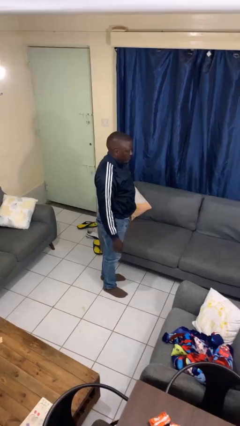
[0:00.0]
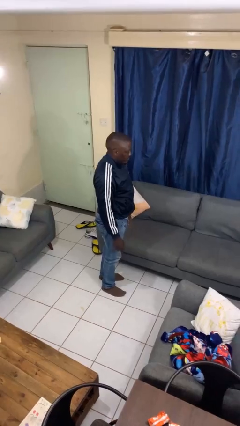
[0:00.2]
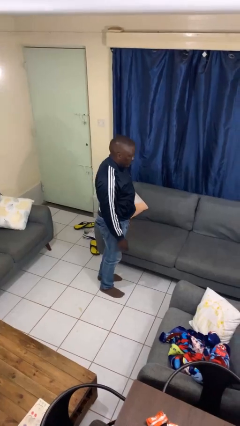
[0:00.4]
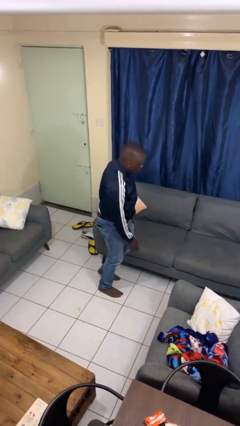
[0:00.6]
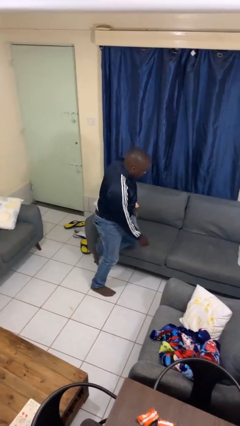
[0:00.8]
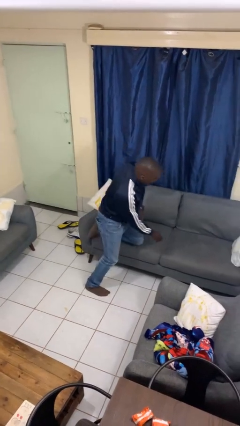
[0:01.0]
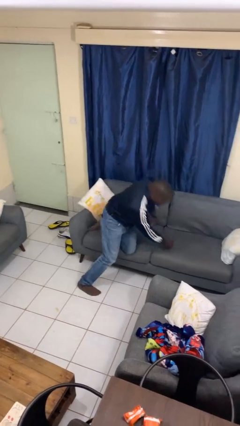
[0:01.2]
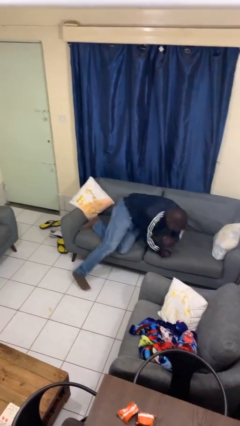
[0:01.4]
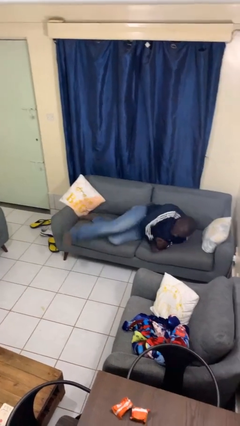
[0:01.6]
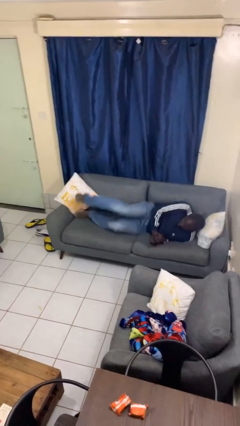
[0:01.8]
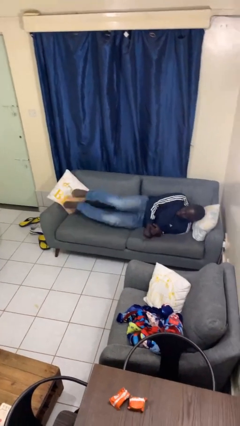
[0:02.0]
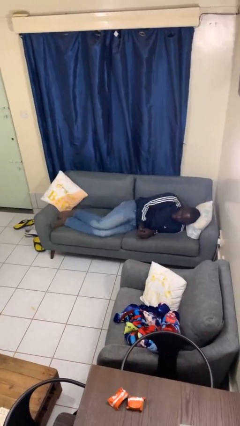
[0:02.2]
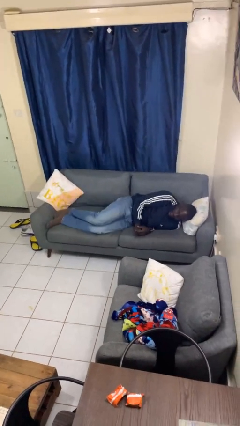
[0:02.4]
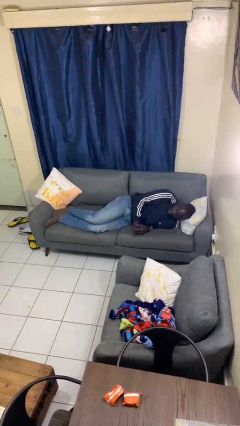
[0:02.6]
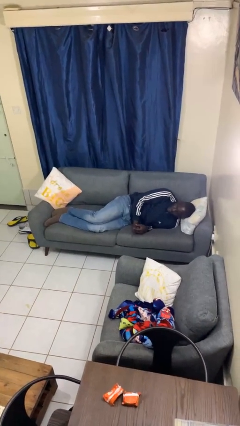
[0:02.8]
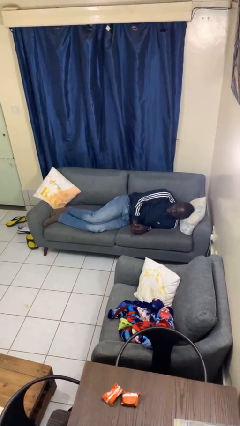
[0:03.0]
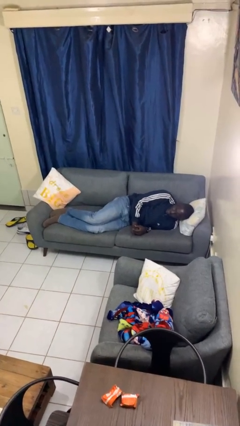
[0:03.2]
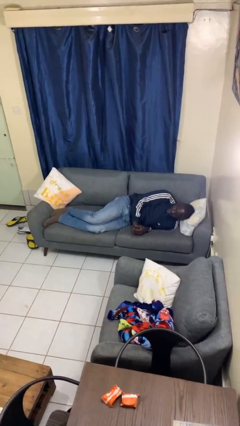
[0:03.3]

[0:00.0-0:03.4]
person lies down on couch

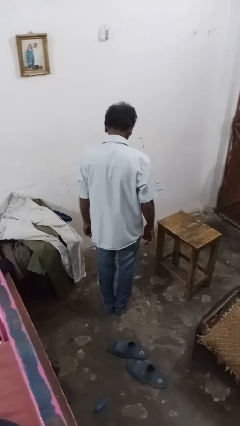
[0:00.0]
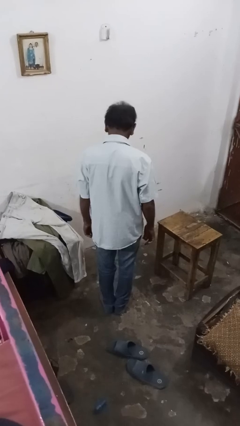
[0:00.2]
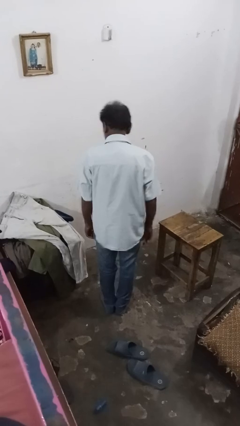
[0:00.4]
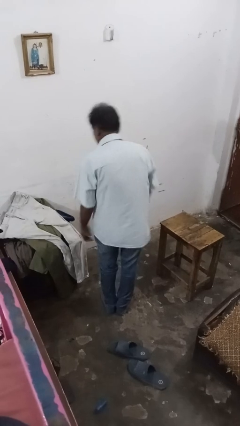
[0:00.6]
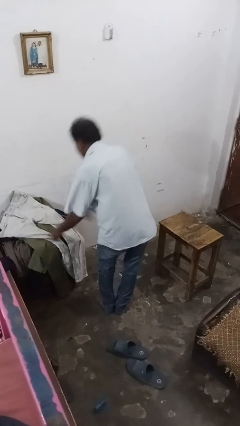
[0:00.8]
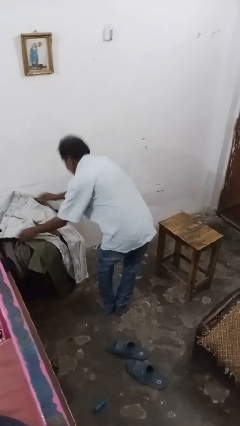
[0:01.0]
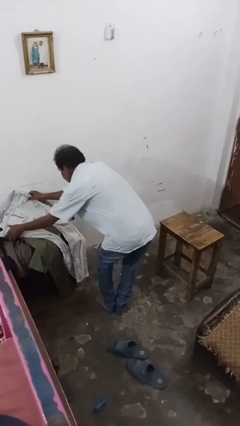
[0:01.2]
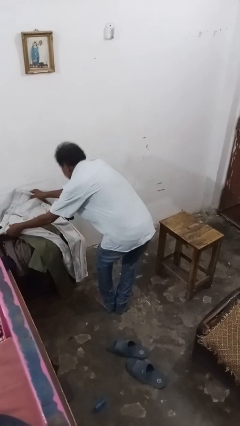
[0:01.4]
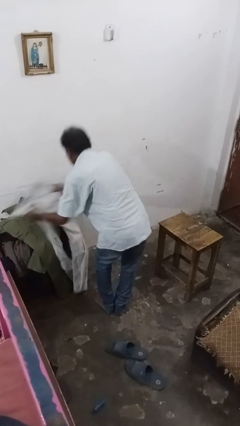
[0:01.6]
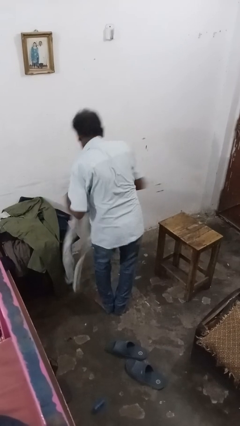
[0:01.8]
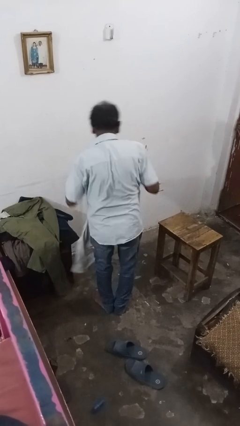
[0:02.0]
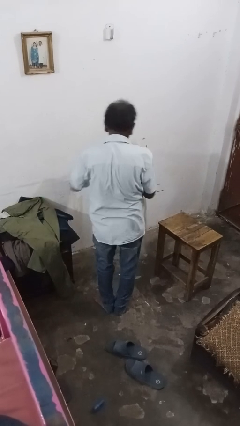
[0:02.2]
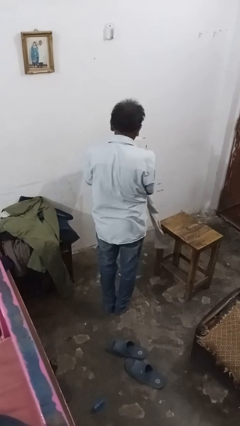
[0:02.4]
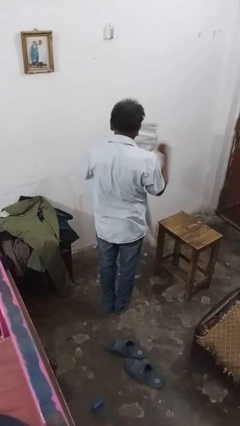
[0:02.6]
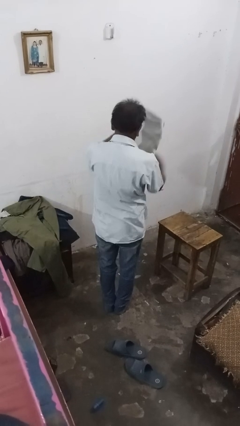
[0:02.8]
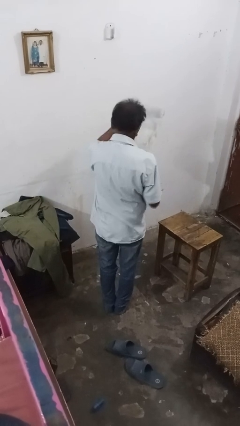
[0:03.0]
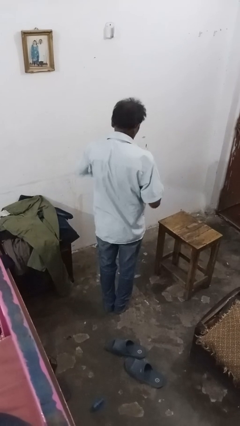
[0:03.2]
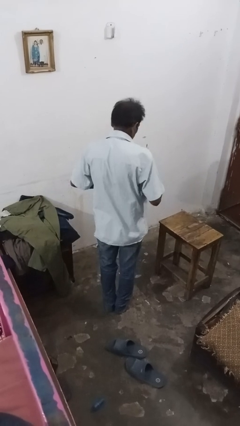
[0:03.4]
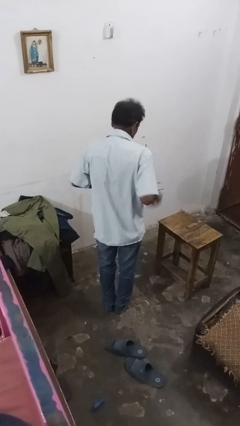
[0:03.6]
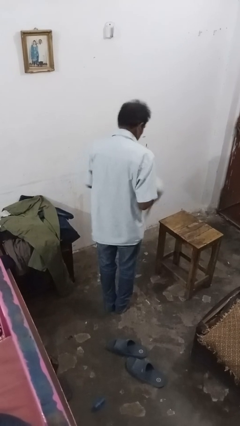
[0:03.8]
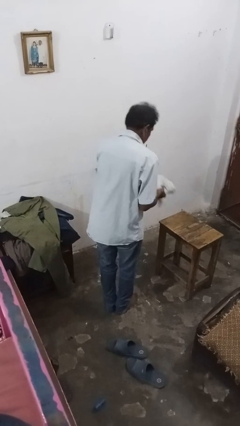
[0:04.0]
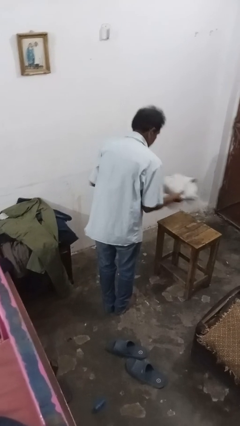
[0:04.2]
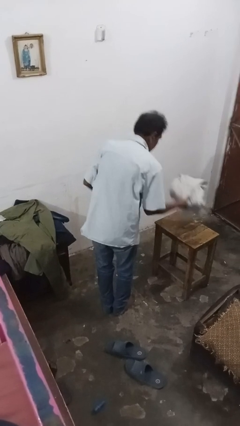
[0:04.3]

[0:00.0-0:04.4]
person folds pants

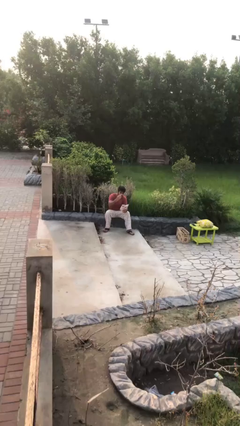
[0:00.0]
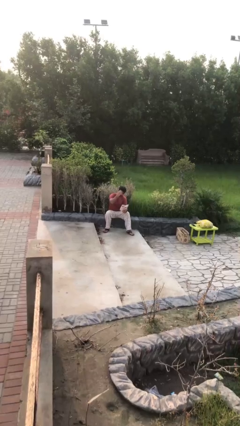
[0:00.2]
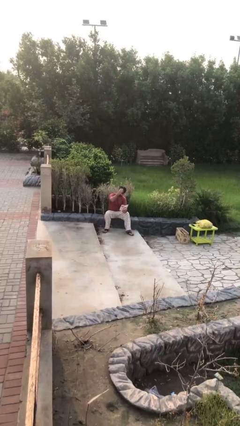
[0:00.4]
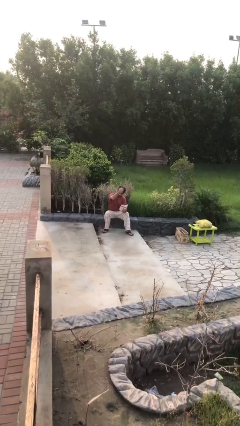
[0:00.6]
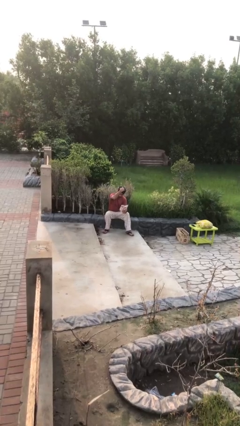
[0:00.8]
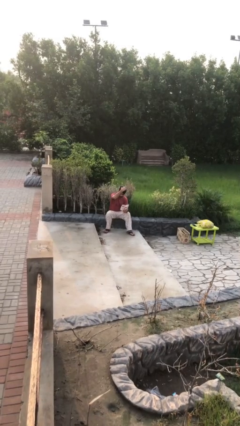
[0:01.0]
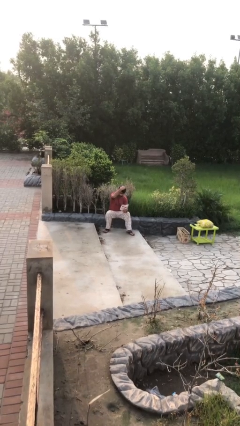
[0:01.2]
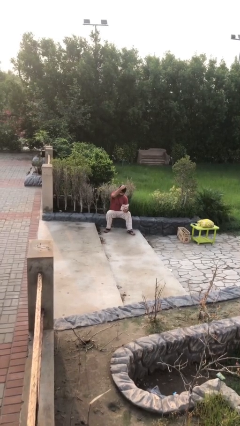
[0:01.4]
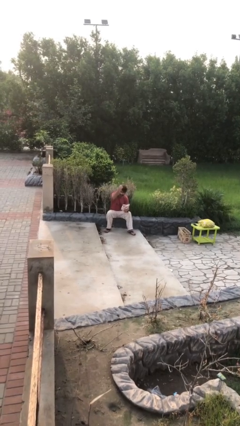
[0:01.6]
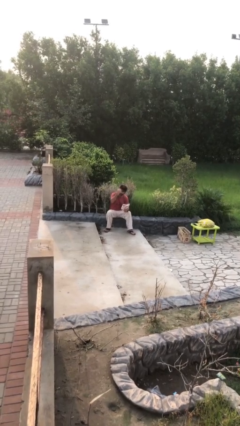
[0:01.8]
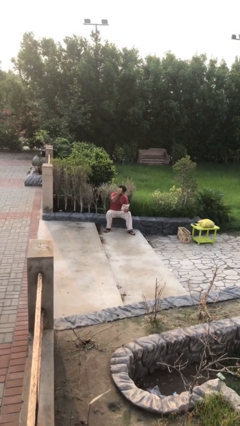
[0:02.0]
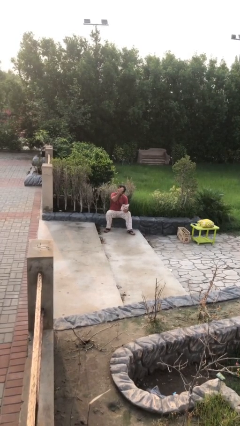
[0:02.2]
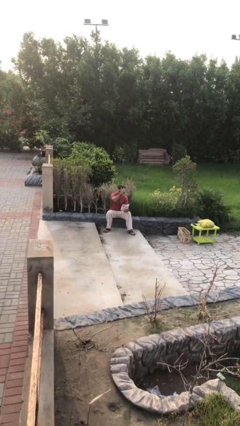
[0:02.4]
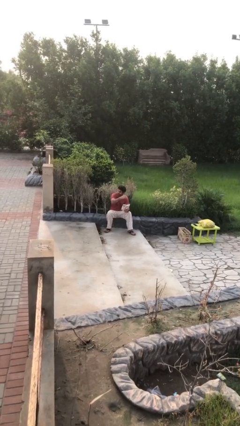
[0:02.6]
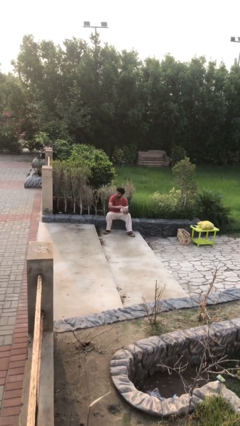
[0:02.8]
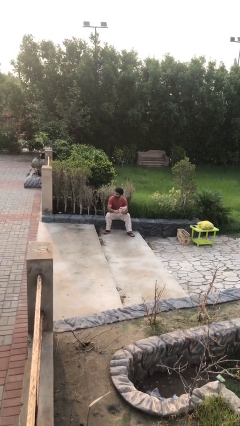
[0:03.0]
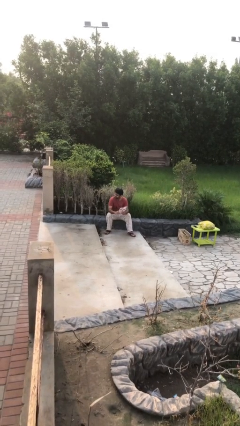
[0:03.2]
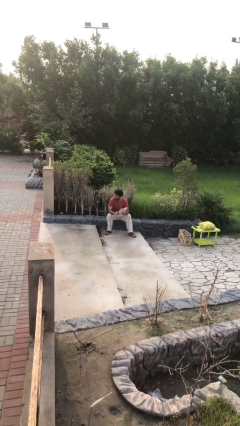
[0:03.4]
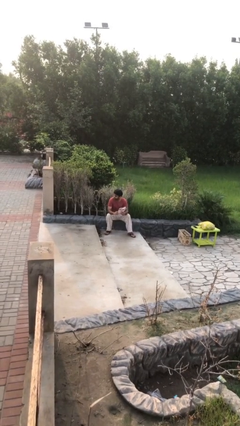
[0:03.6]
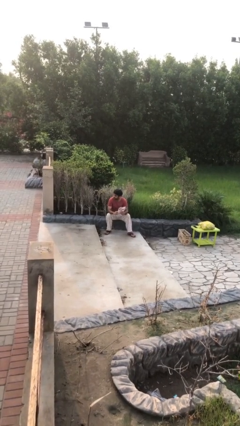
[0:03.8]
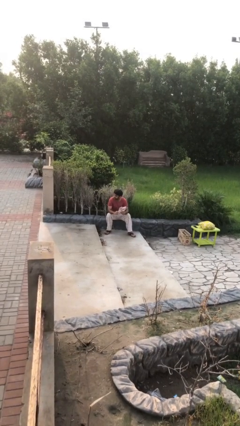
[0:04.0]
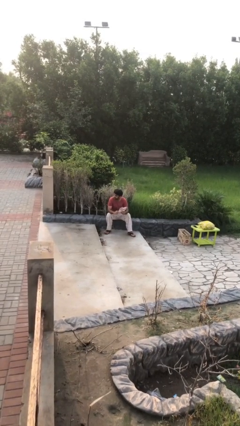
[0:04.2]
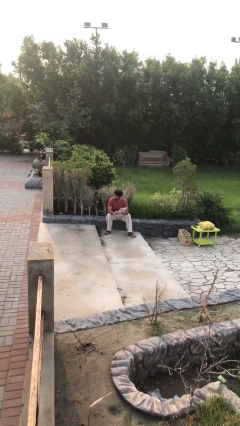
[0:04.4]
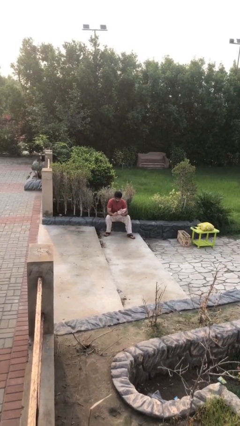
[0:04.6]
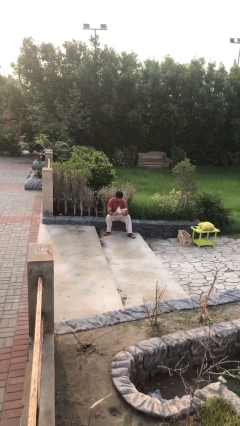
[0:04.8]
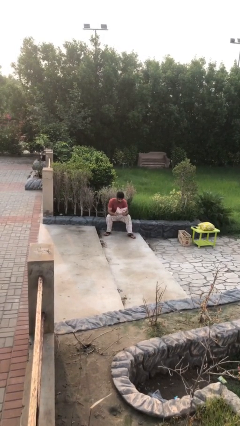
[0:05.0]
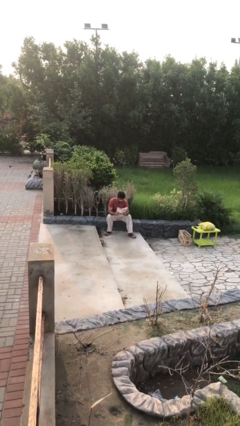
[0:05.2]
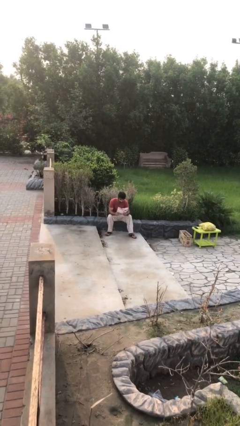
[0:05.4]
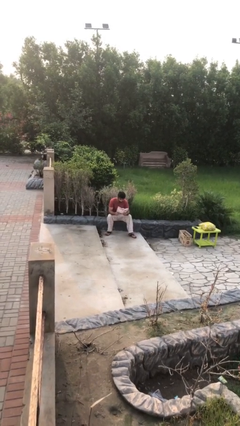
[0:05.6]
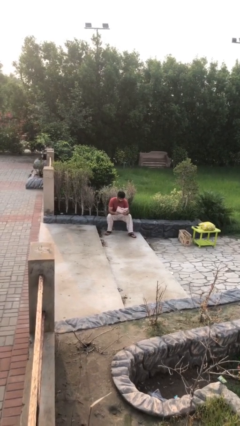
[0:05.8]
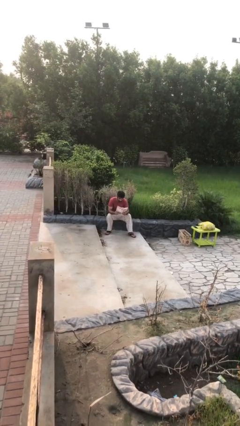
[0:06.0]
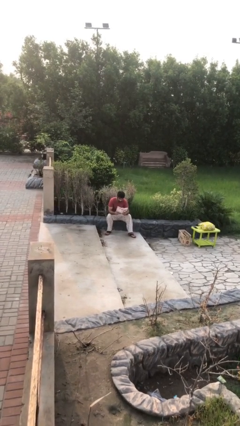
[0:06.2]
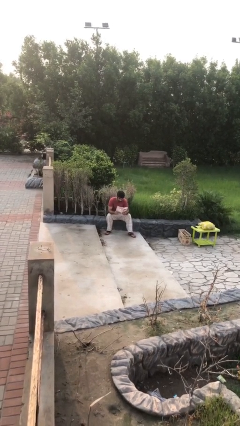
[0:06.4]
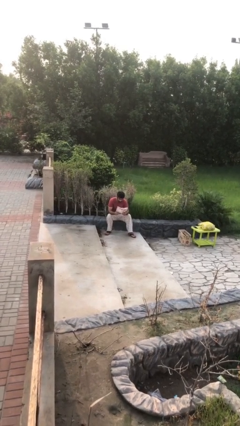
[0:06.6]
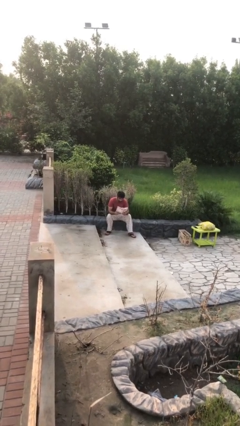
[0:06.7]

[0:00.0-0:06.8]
person reads document

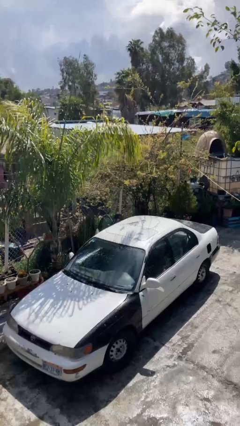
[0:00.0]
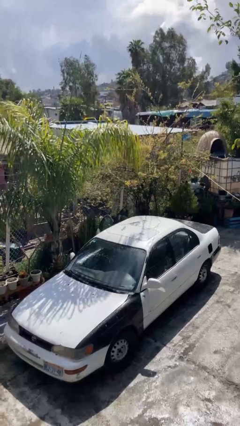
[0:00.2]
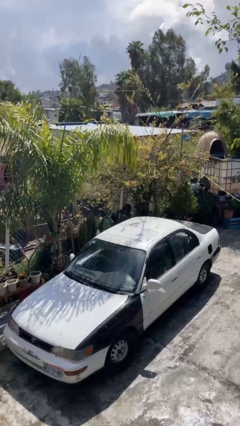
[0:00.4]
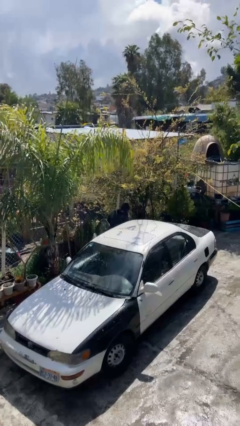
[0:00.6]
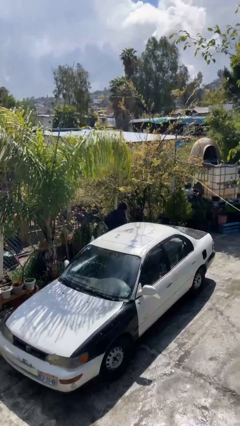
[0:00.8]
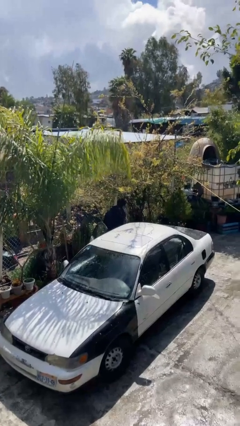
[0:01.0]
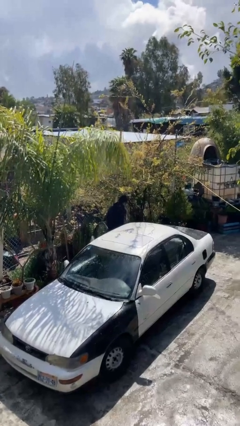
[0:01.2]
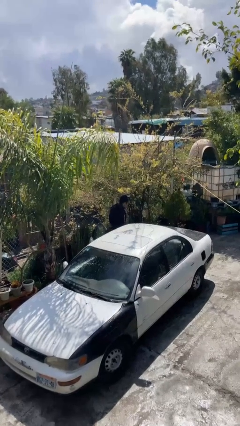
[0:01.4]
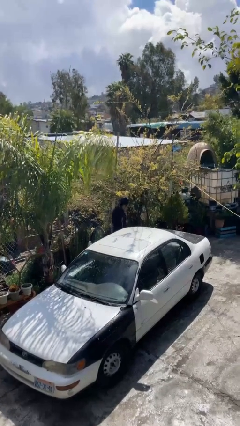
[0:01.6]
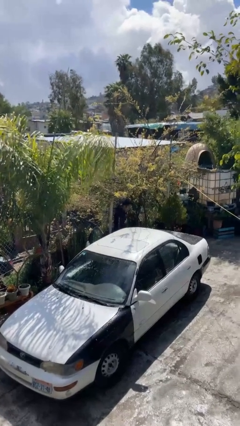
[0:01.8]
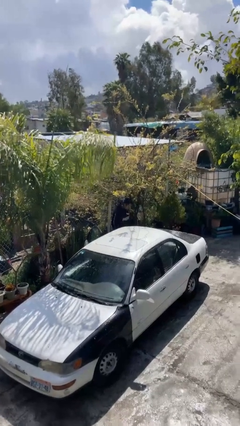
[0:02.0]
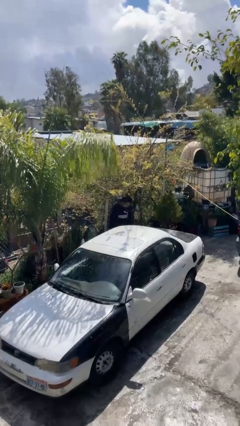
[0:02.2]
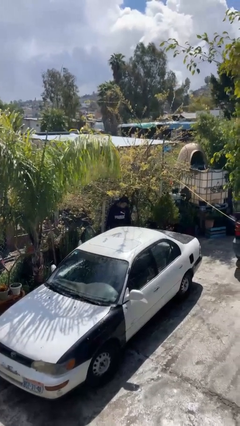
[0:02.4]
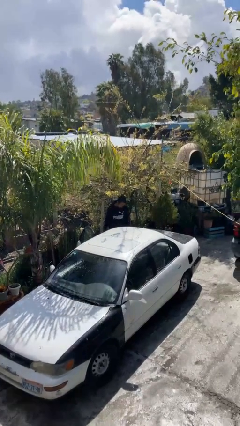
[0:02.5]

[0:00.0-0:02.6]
person exits car

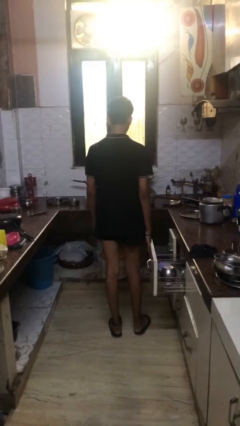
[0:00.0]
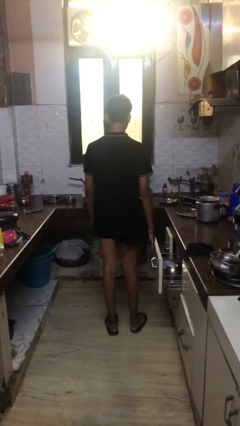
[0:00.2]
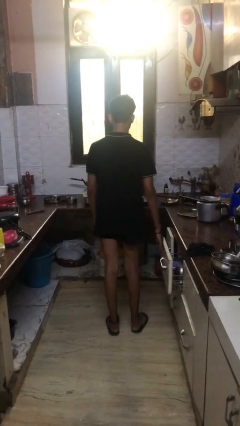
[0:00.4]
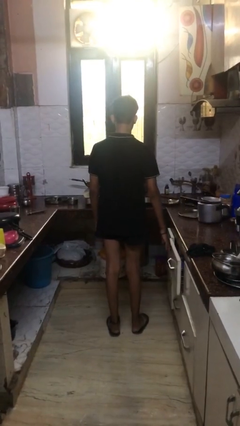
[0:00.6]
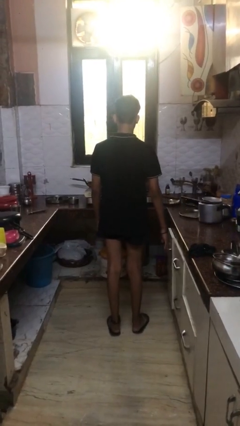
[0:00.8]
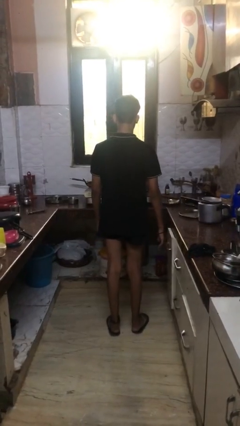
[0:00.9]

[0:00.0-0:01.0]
person closes kitchen drawer
